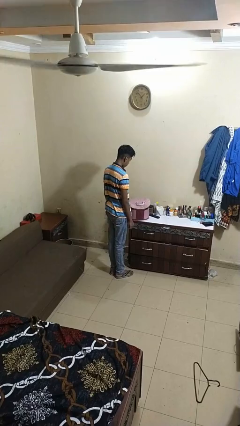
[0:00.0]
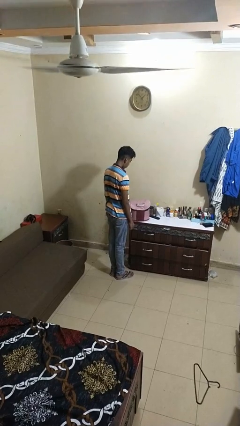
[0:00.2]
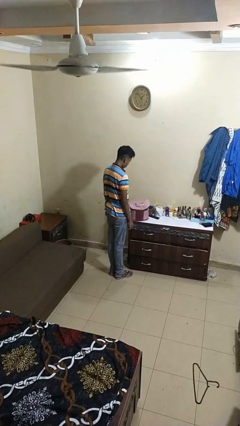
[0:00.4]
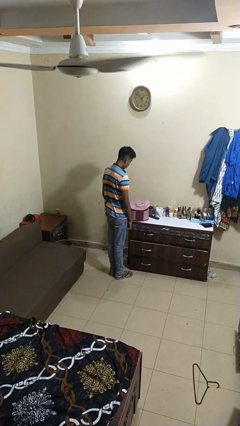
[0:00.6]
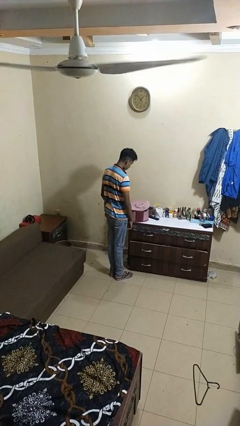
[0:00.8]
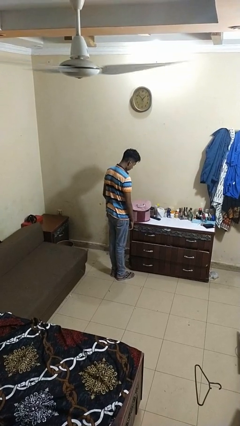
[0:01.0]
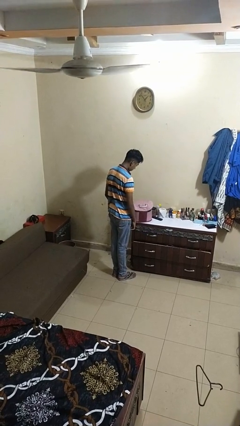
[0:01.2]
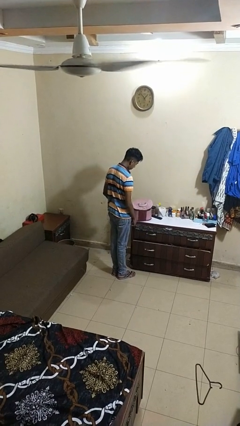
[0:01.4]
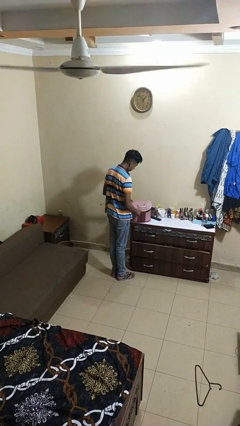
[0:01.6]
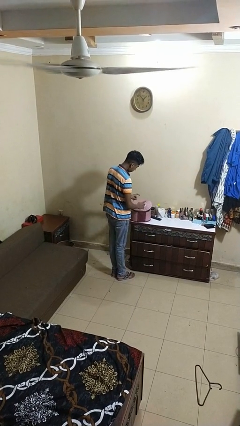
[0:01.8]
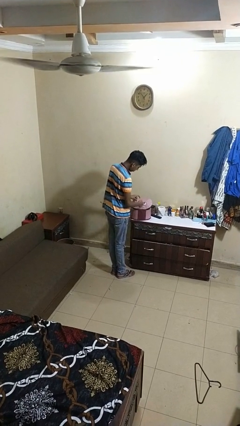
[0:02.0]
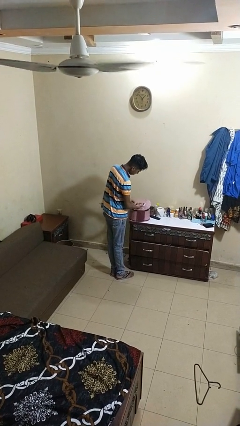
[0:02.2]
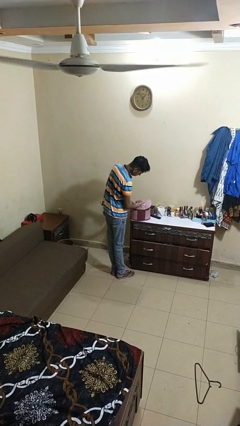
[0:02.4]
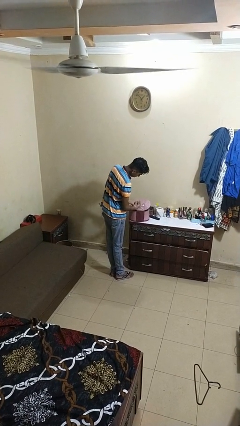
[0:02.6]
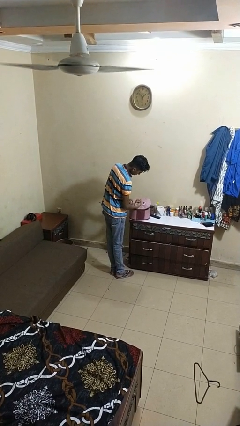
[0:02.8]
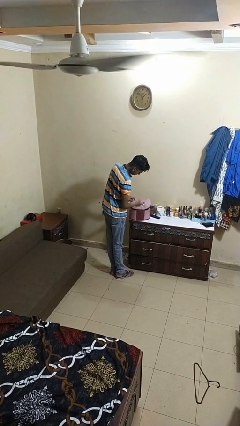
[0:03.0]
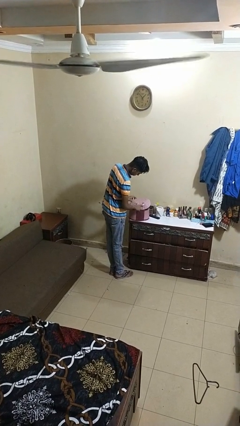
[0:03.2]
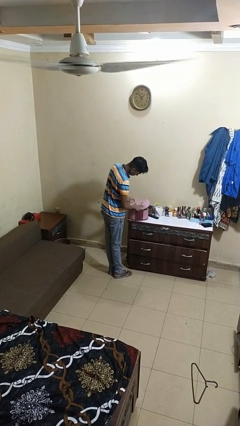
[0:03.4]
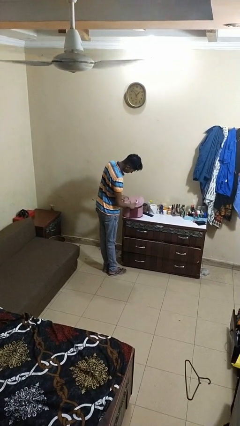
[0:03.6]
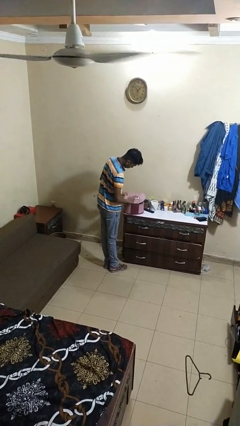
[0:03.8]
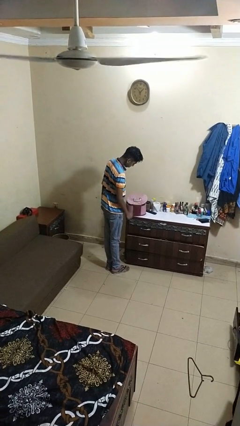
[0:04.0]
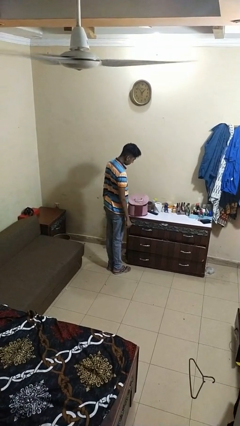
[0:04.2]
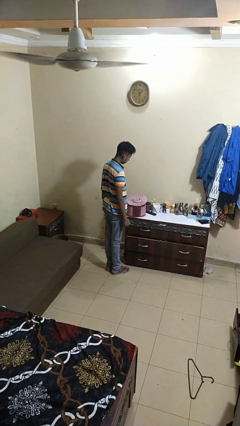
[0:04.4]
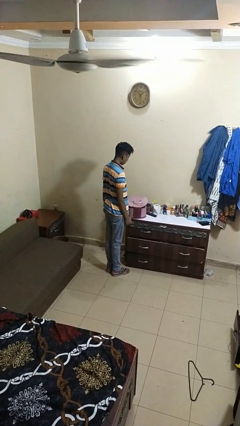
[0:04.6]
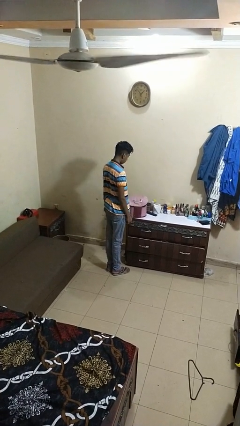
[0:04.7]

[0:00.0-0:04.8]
person taps object with finger

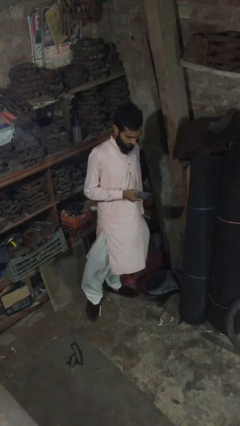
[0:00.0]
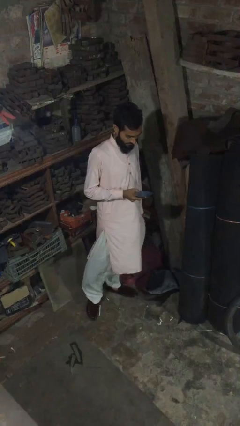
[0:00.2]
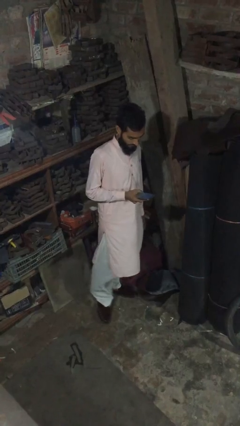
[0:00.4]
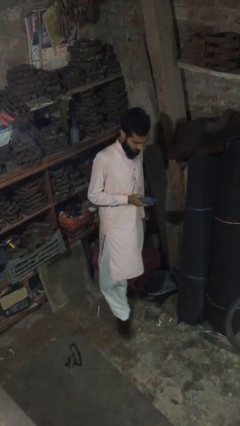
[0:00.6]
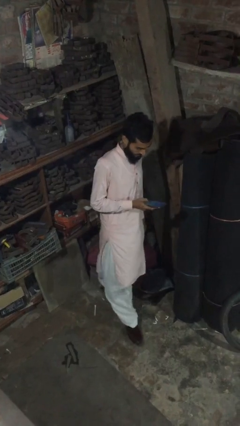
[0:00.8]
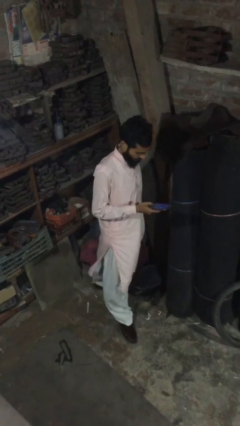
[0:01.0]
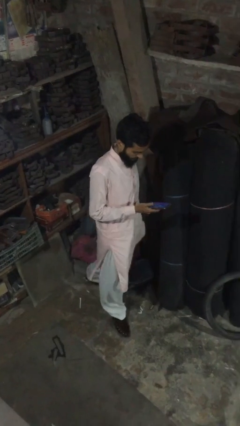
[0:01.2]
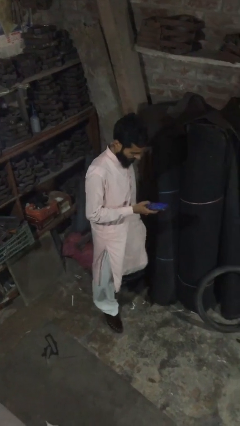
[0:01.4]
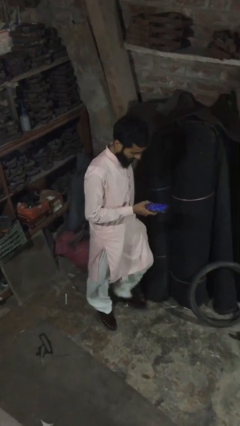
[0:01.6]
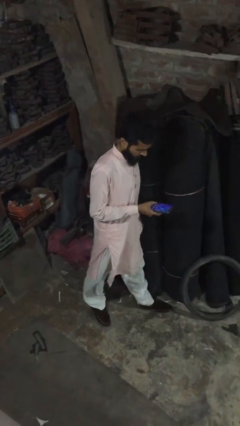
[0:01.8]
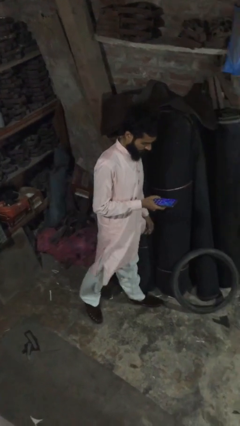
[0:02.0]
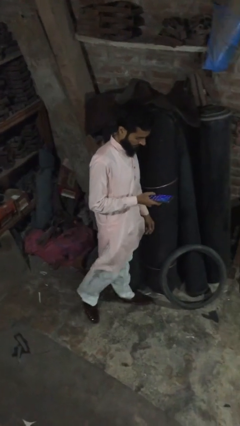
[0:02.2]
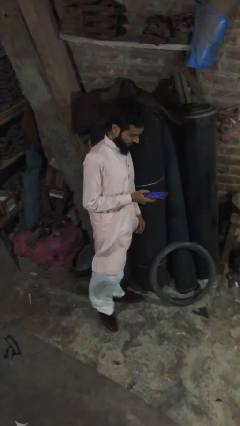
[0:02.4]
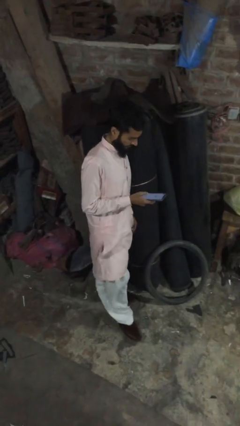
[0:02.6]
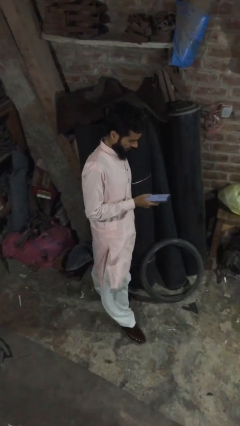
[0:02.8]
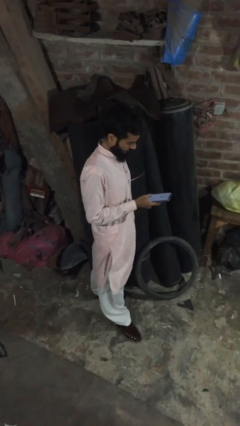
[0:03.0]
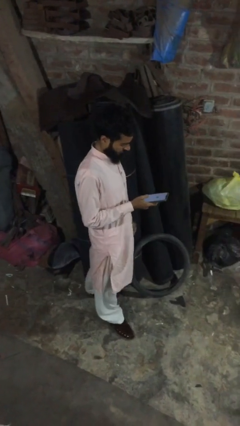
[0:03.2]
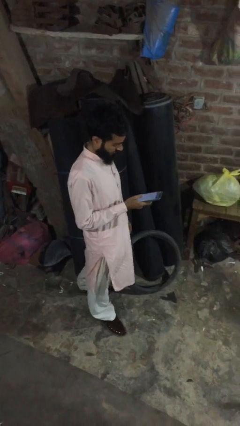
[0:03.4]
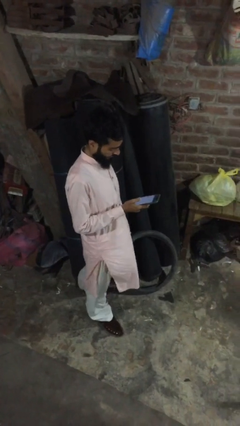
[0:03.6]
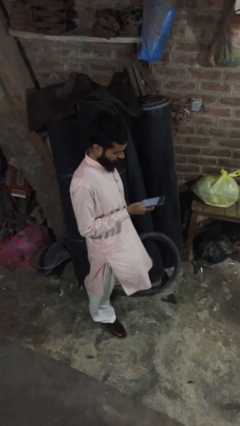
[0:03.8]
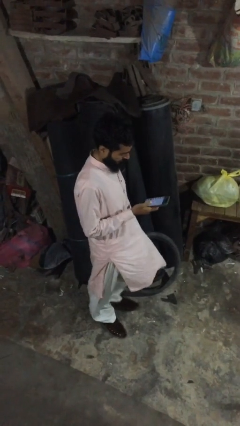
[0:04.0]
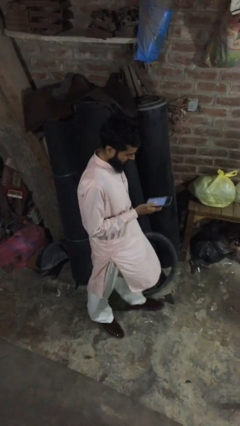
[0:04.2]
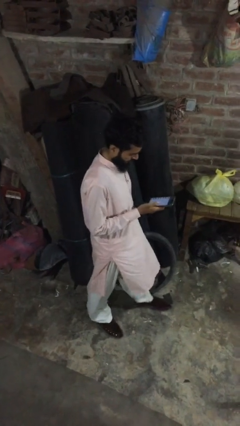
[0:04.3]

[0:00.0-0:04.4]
person texts on phone

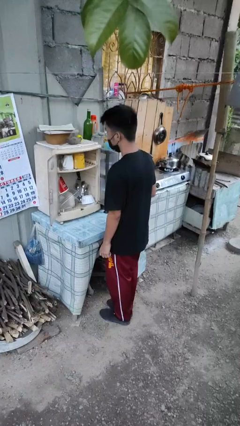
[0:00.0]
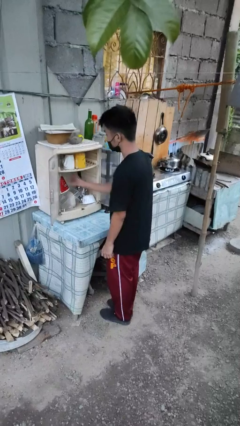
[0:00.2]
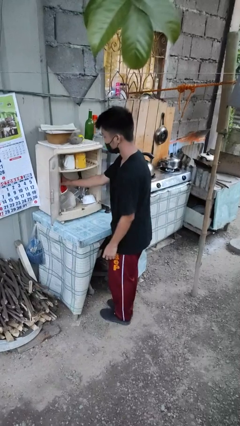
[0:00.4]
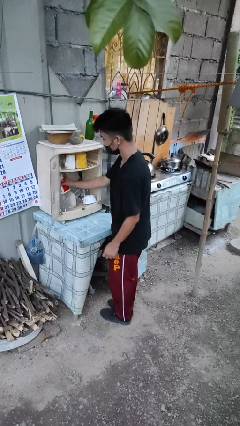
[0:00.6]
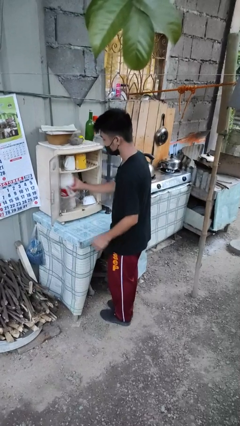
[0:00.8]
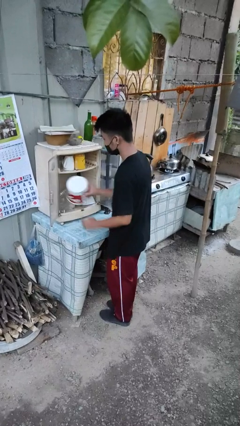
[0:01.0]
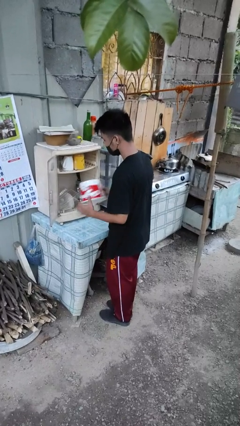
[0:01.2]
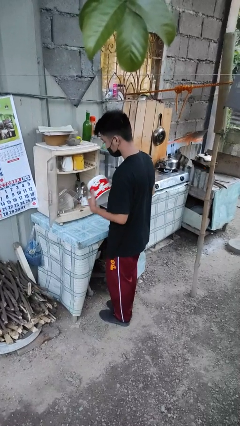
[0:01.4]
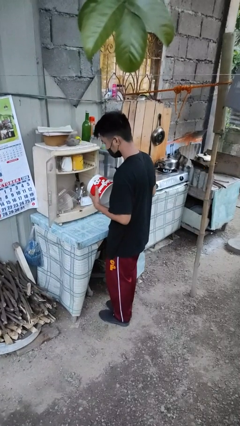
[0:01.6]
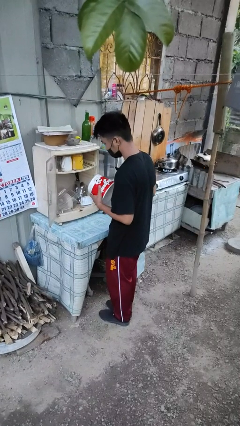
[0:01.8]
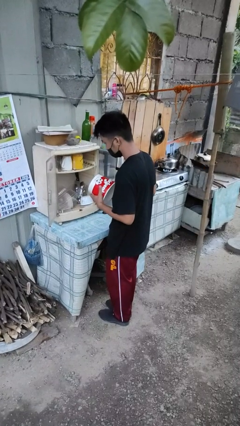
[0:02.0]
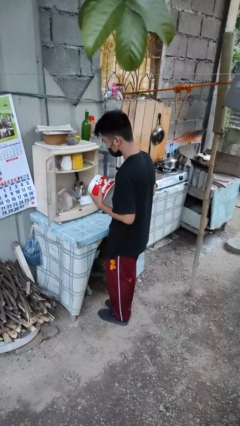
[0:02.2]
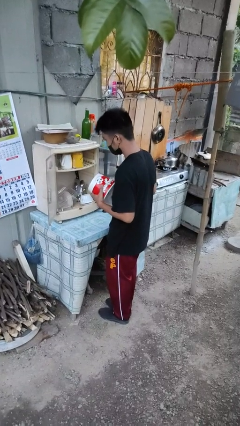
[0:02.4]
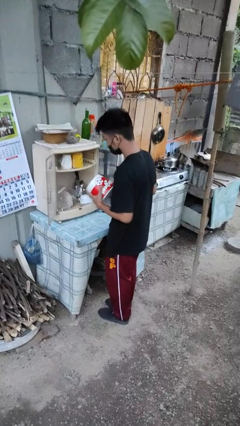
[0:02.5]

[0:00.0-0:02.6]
person picks up object from cabinet

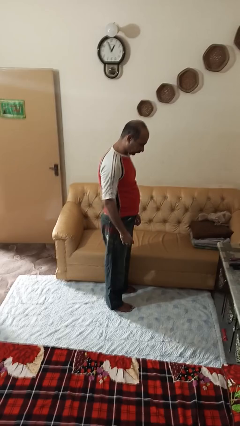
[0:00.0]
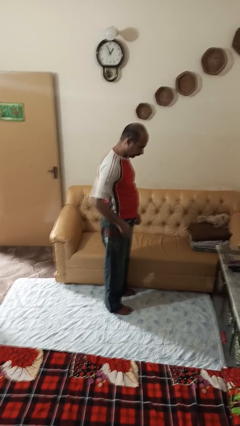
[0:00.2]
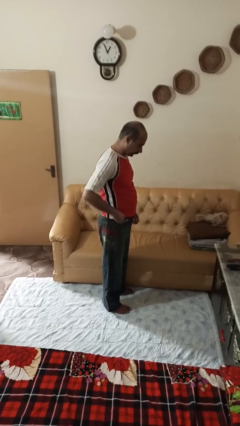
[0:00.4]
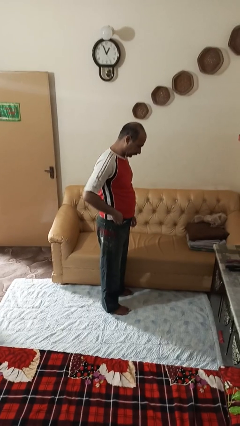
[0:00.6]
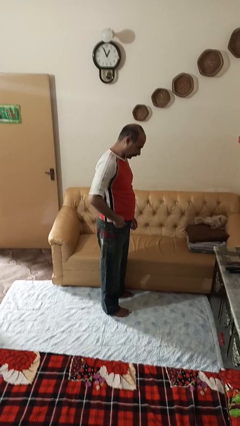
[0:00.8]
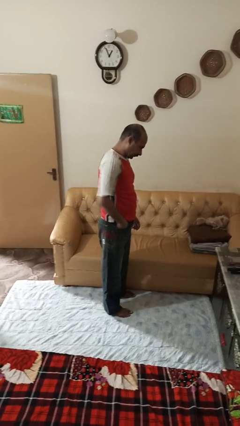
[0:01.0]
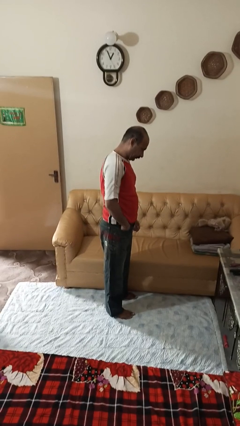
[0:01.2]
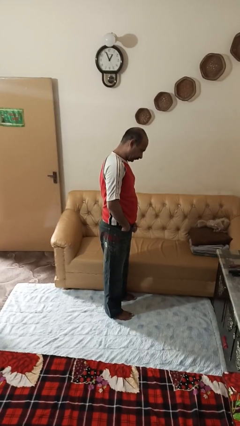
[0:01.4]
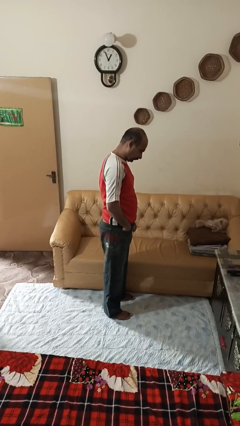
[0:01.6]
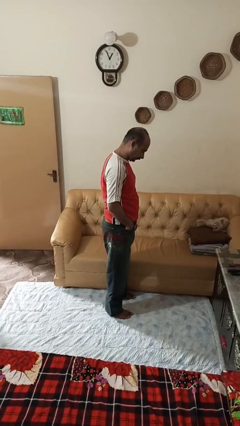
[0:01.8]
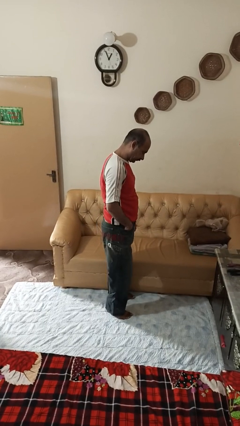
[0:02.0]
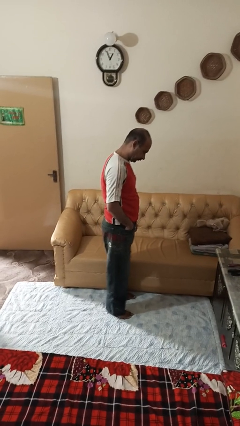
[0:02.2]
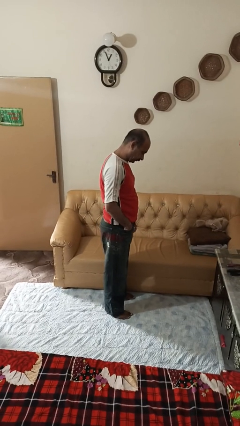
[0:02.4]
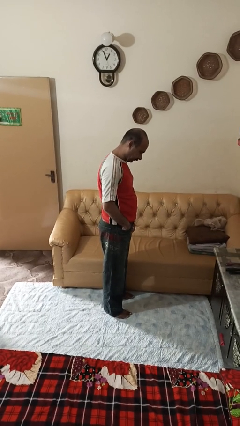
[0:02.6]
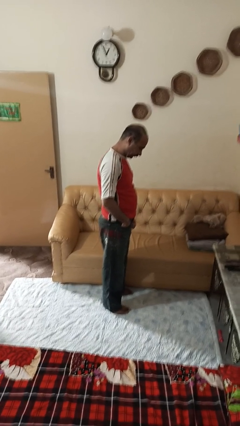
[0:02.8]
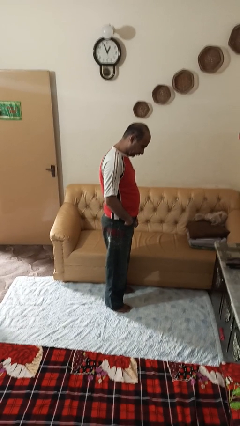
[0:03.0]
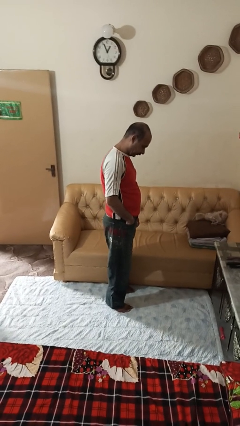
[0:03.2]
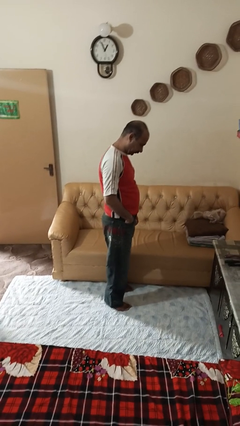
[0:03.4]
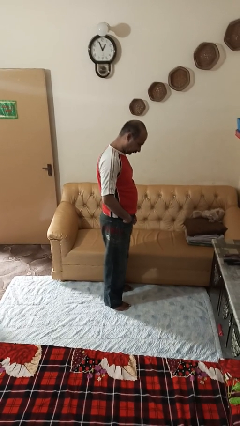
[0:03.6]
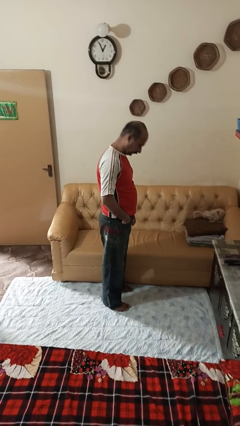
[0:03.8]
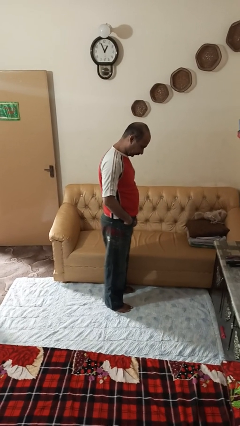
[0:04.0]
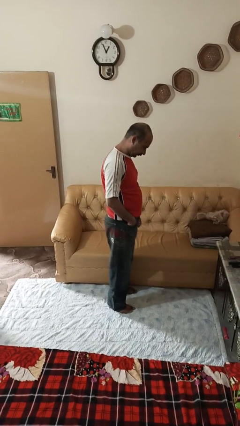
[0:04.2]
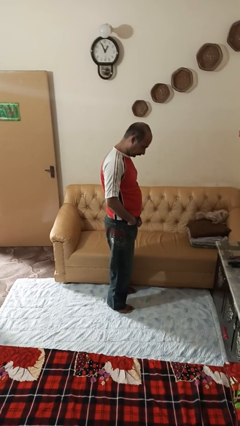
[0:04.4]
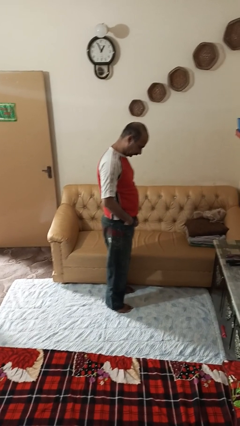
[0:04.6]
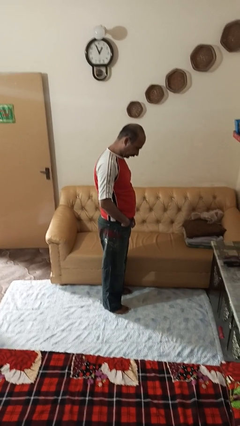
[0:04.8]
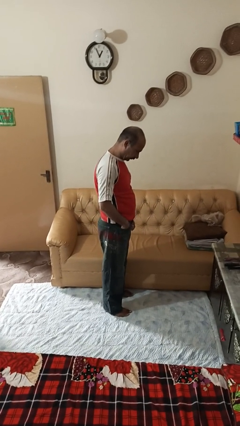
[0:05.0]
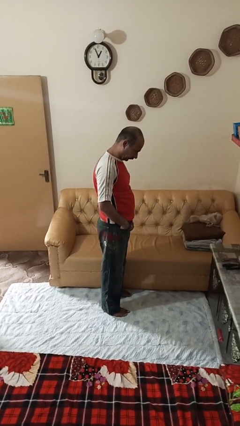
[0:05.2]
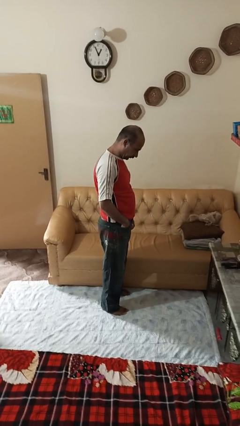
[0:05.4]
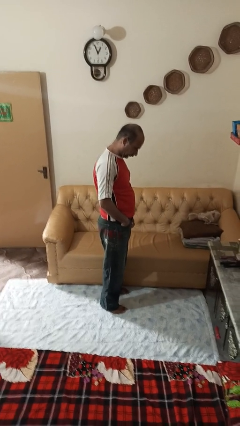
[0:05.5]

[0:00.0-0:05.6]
person puts hands in back pockets

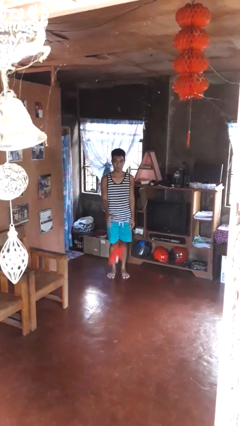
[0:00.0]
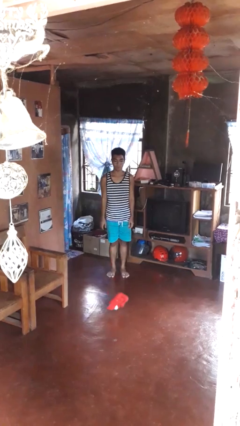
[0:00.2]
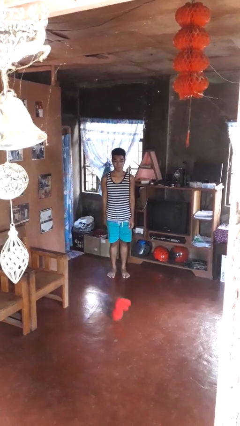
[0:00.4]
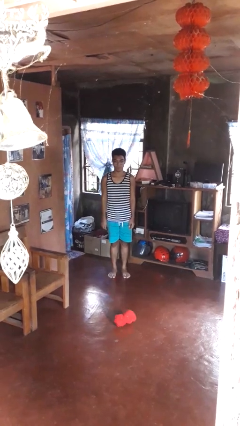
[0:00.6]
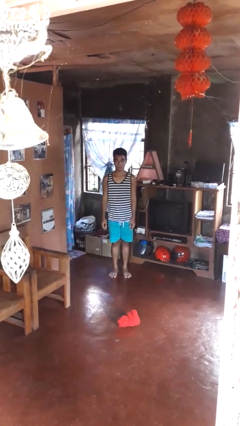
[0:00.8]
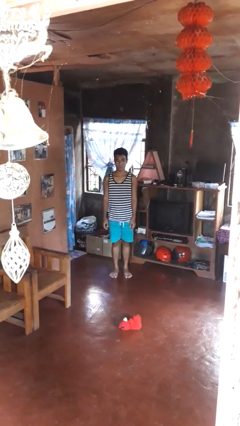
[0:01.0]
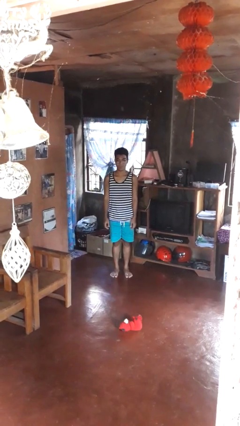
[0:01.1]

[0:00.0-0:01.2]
person throws object to ground
